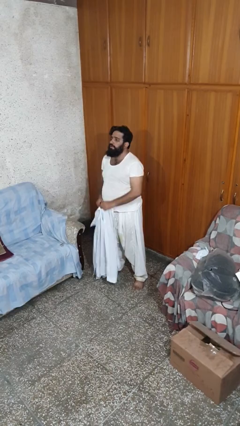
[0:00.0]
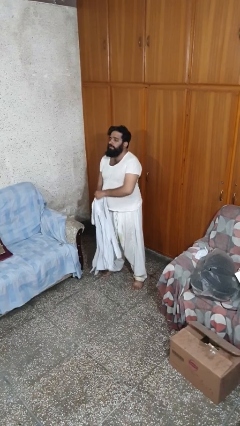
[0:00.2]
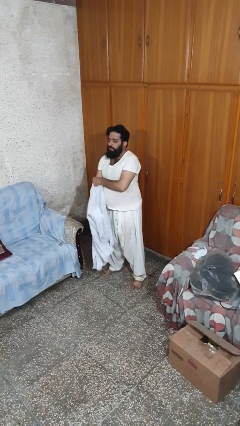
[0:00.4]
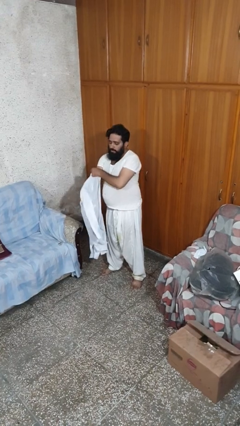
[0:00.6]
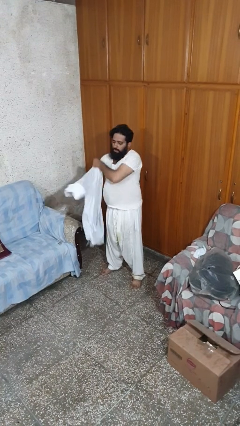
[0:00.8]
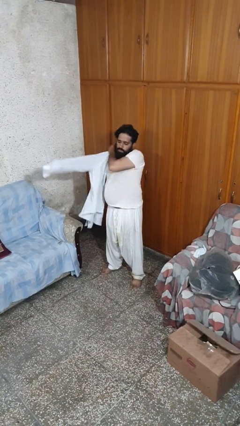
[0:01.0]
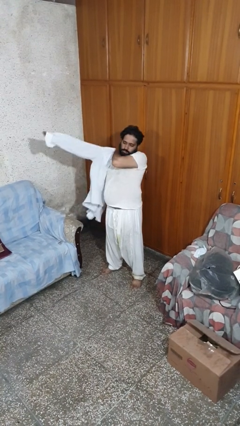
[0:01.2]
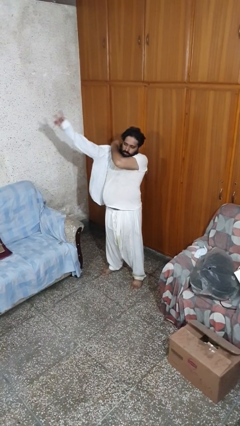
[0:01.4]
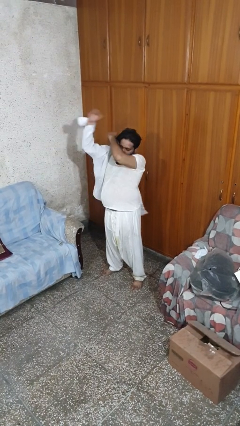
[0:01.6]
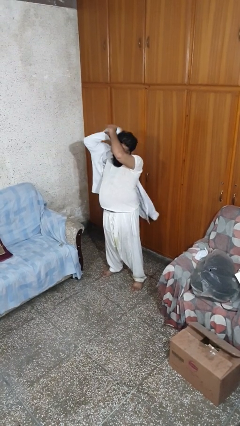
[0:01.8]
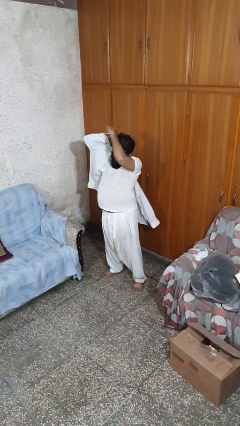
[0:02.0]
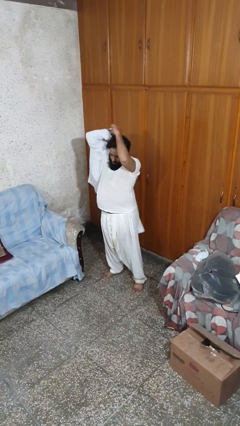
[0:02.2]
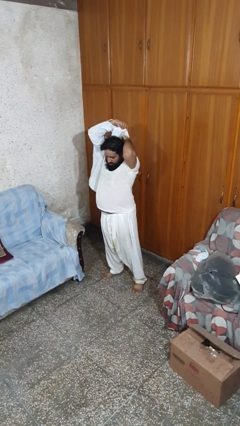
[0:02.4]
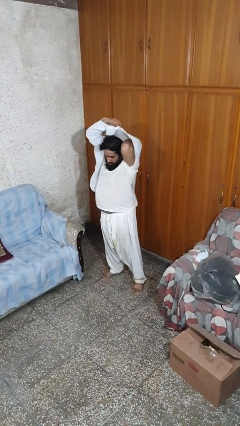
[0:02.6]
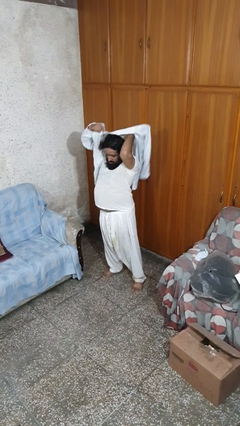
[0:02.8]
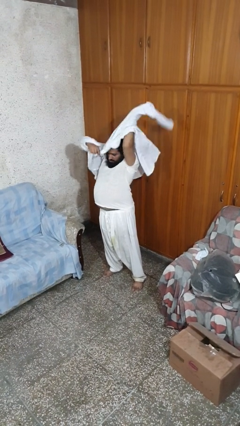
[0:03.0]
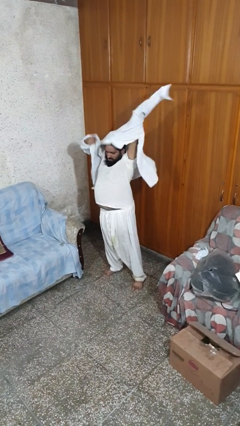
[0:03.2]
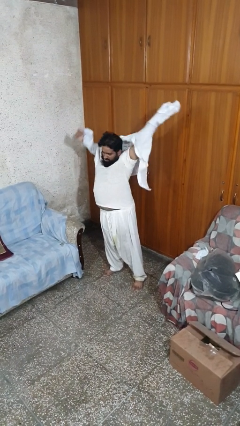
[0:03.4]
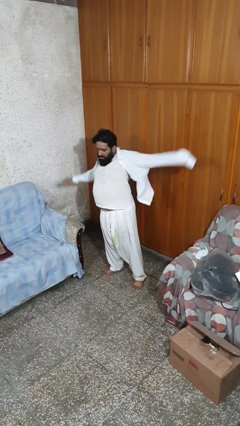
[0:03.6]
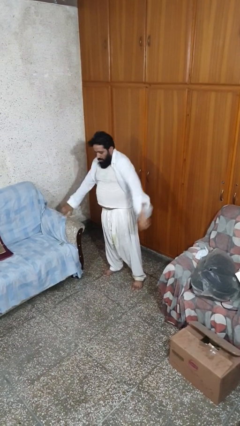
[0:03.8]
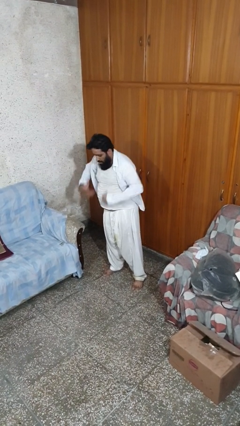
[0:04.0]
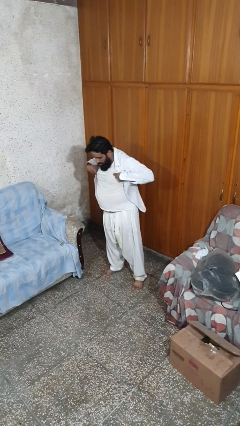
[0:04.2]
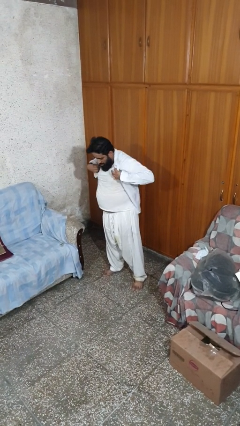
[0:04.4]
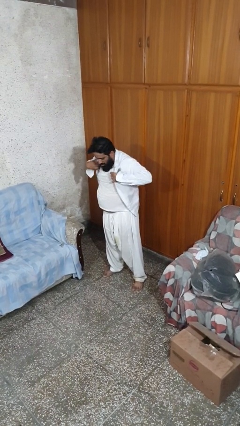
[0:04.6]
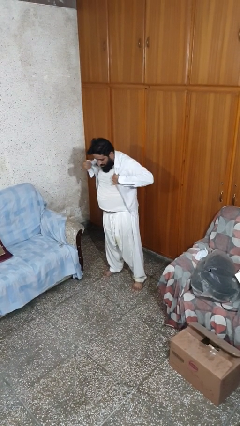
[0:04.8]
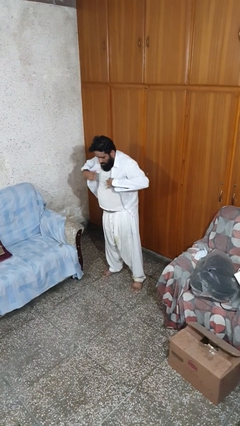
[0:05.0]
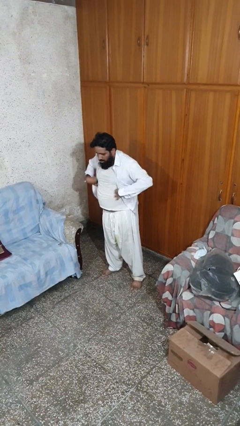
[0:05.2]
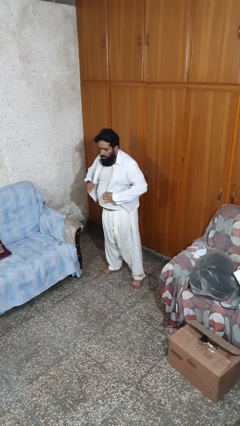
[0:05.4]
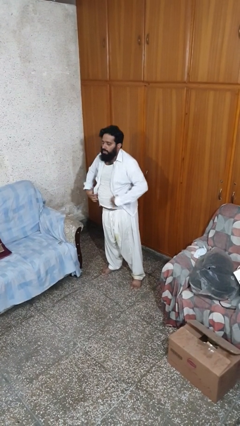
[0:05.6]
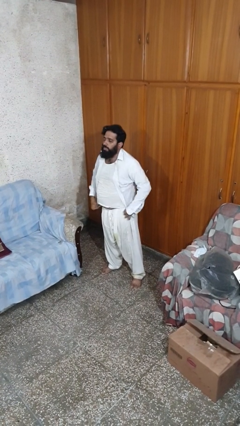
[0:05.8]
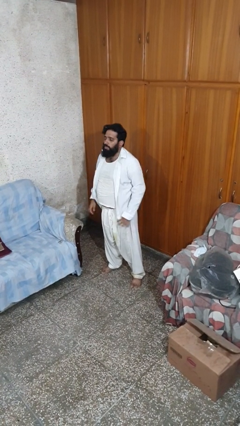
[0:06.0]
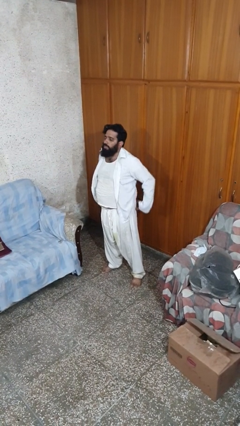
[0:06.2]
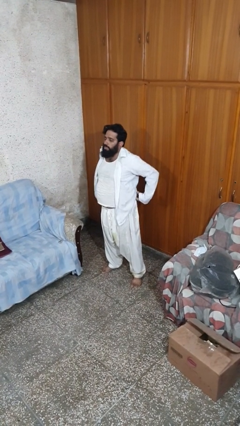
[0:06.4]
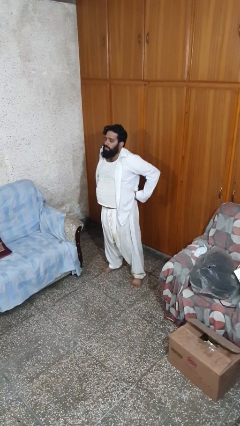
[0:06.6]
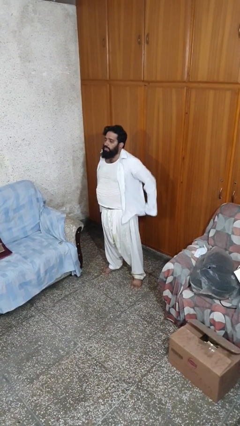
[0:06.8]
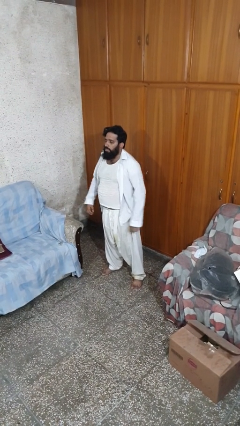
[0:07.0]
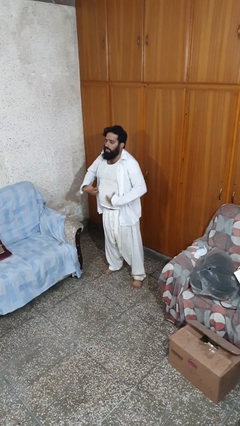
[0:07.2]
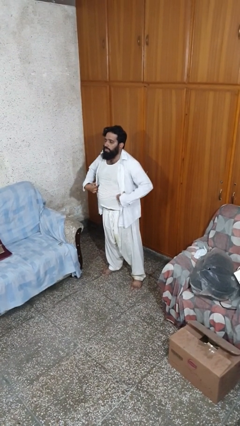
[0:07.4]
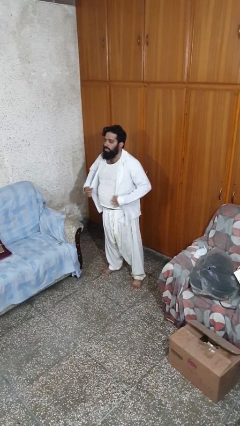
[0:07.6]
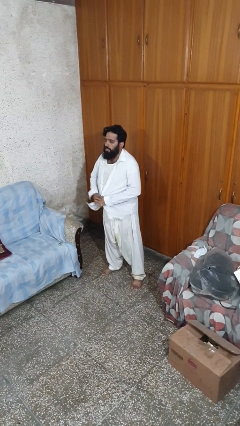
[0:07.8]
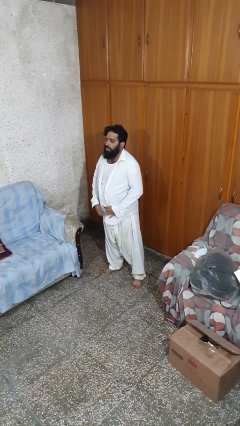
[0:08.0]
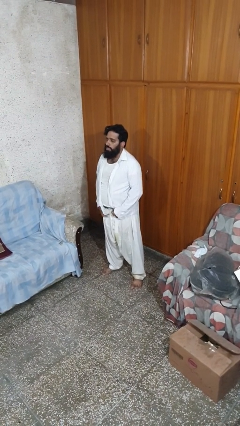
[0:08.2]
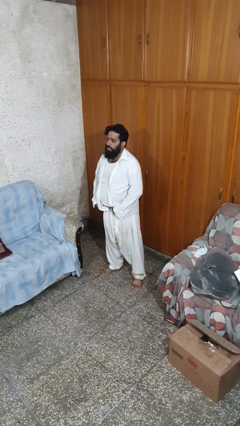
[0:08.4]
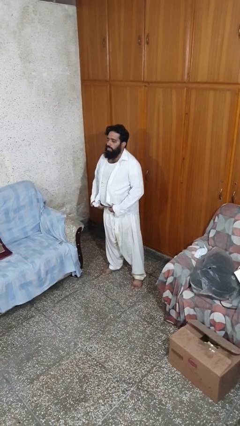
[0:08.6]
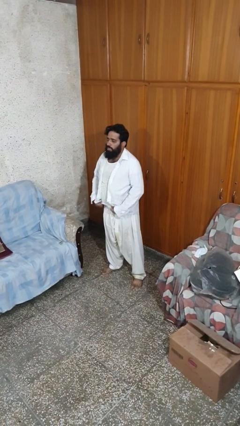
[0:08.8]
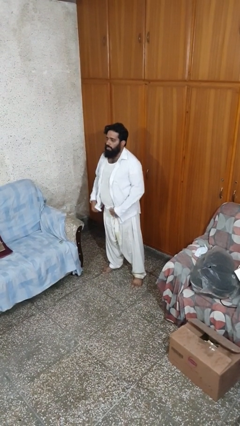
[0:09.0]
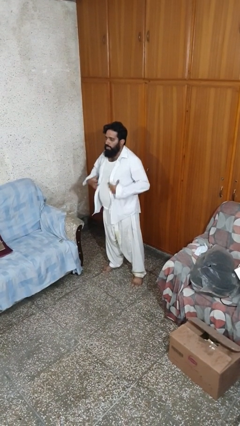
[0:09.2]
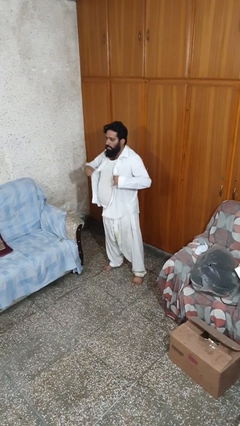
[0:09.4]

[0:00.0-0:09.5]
person puts on shirt

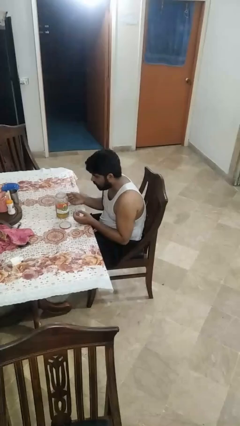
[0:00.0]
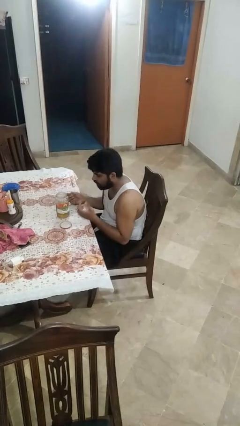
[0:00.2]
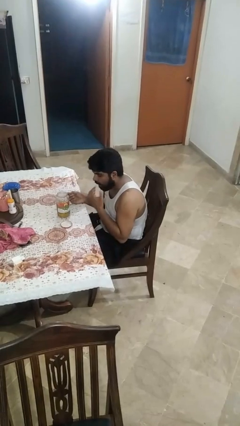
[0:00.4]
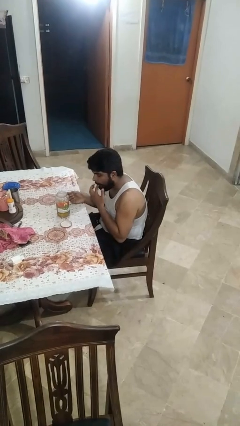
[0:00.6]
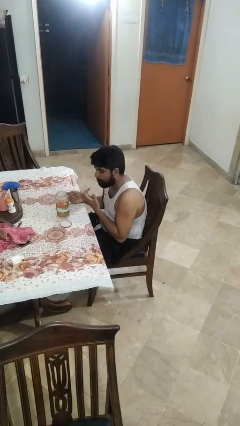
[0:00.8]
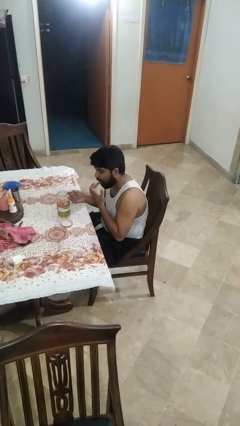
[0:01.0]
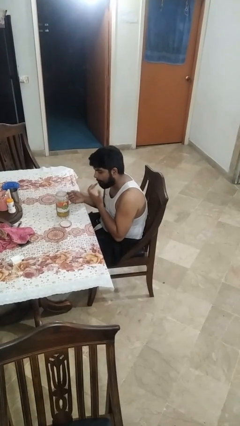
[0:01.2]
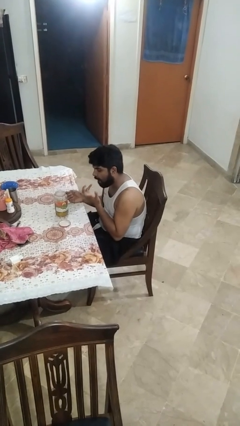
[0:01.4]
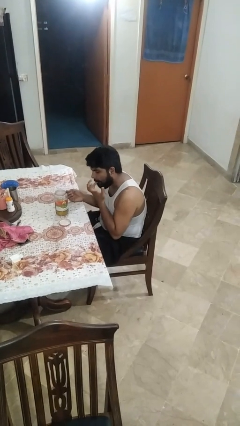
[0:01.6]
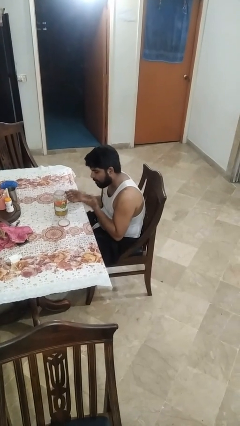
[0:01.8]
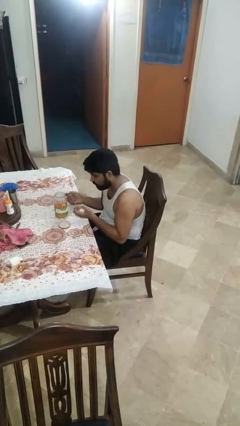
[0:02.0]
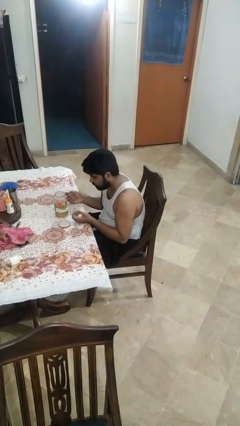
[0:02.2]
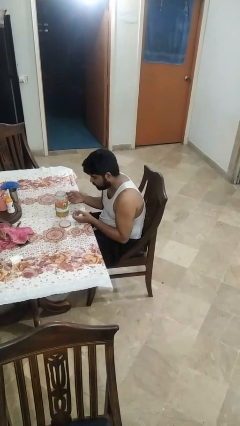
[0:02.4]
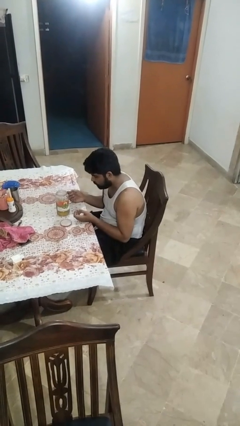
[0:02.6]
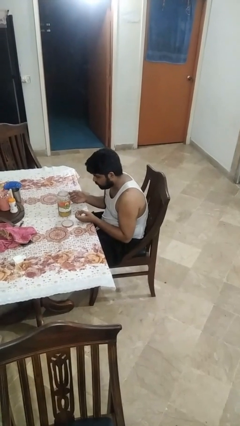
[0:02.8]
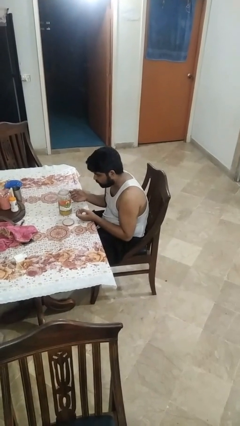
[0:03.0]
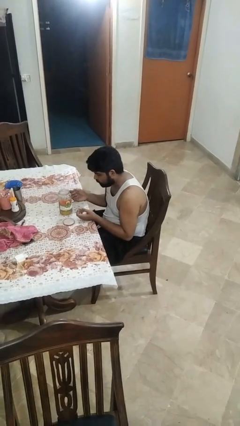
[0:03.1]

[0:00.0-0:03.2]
person licks fingers

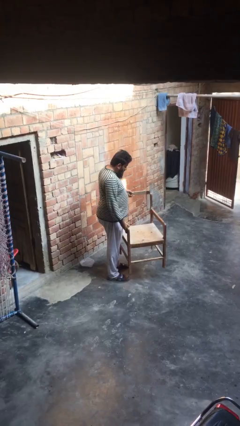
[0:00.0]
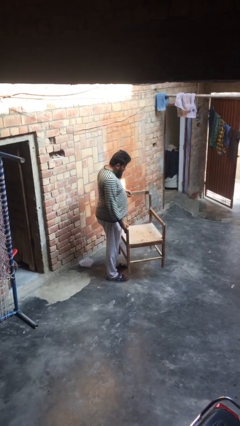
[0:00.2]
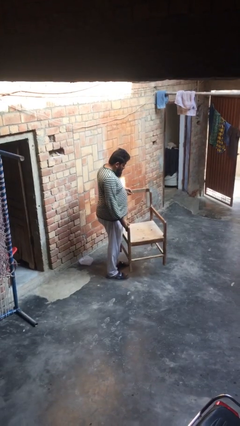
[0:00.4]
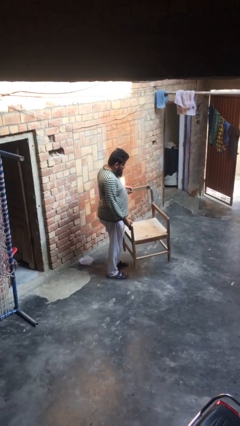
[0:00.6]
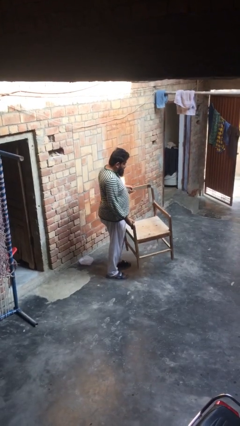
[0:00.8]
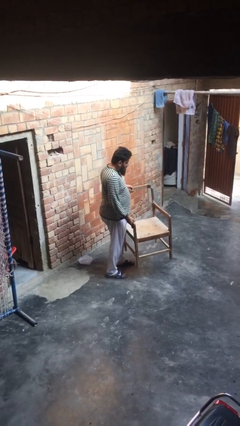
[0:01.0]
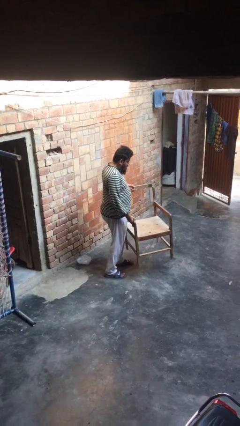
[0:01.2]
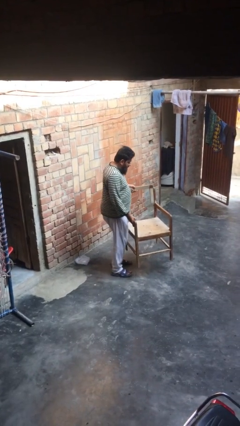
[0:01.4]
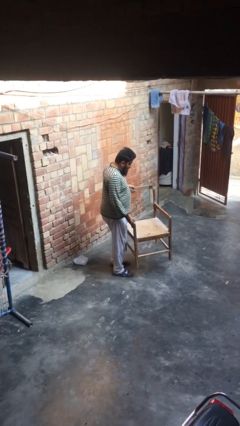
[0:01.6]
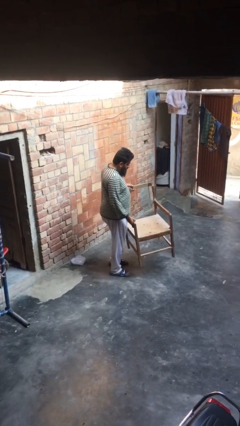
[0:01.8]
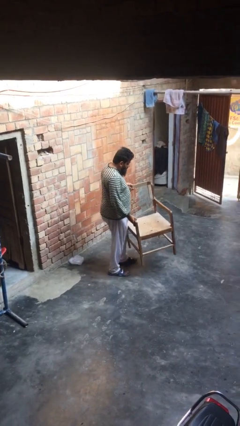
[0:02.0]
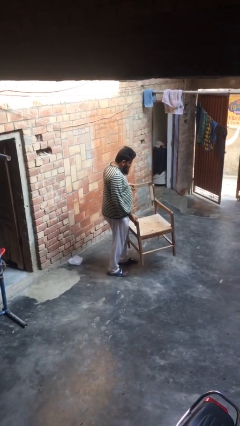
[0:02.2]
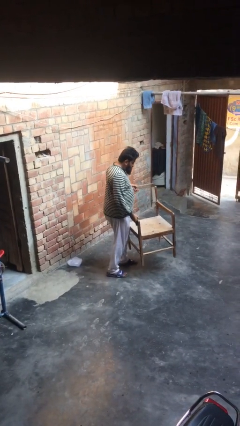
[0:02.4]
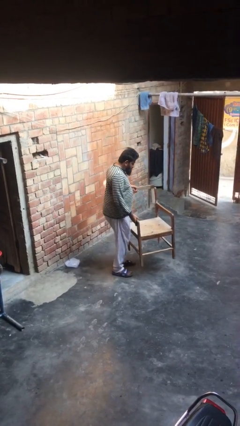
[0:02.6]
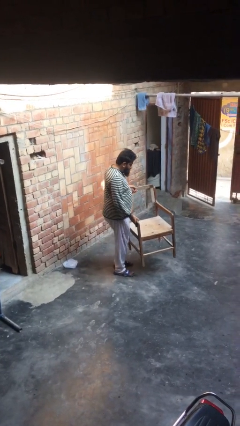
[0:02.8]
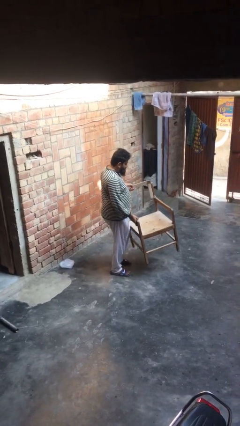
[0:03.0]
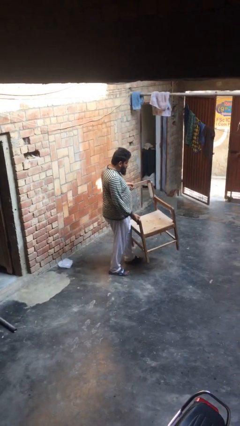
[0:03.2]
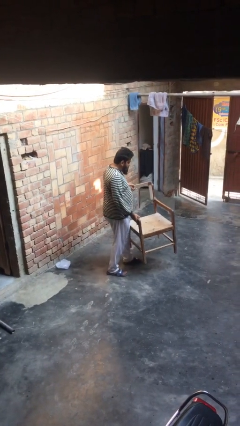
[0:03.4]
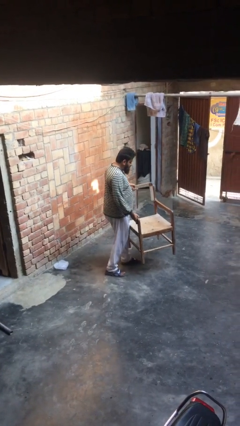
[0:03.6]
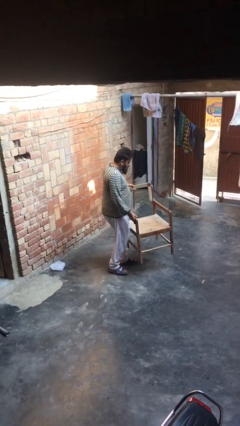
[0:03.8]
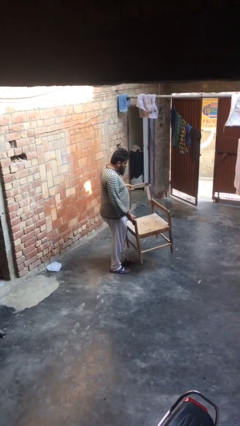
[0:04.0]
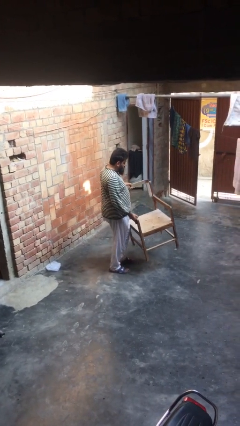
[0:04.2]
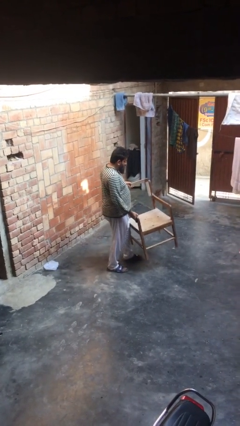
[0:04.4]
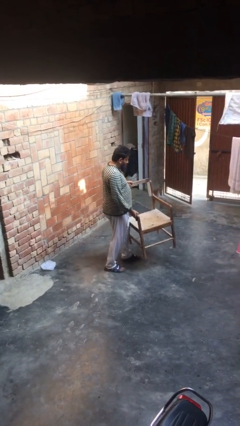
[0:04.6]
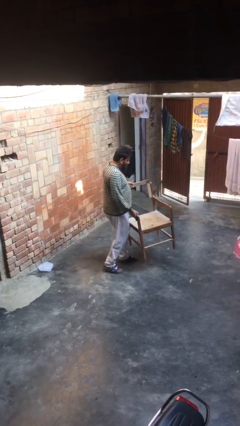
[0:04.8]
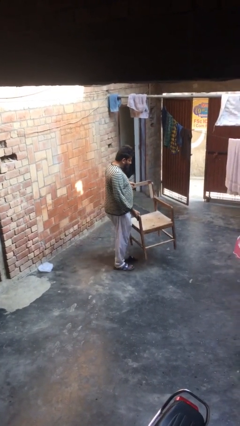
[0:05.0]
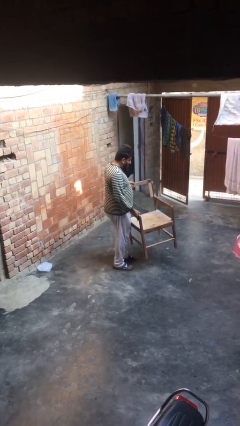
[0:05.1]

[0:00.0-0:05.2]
person carries heavy object

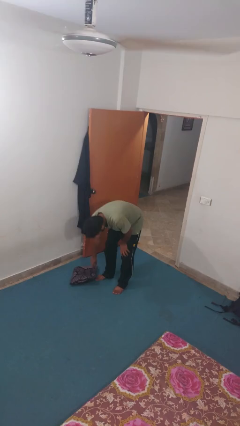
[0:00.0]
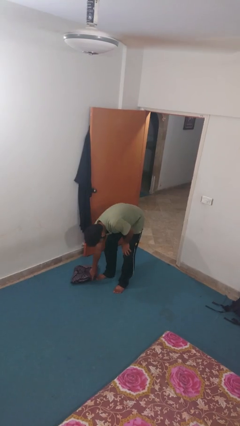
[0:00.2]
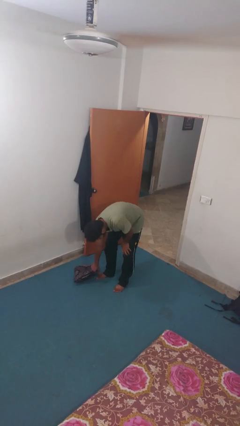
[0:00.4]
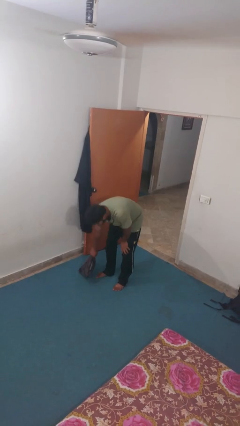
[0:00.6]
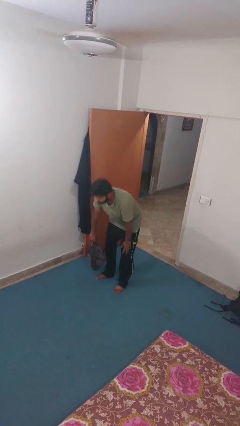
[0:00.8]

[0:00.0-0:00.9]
person picks up object from floor
